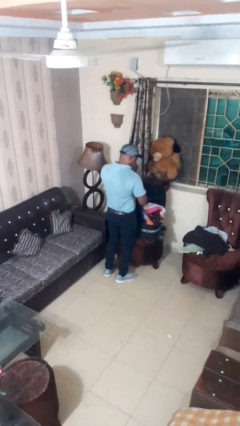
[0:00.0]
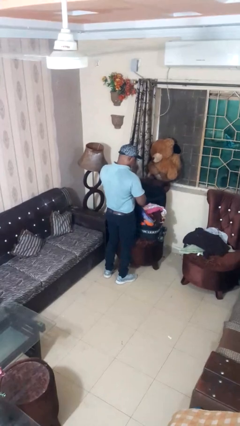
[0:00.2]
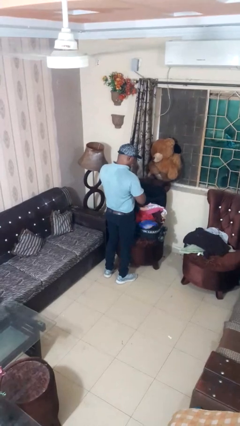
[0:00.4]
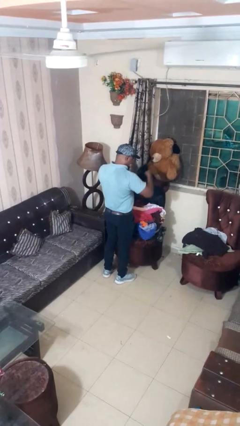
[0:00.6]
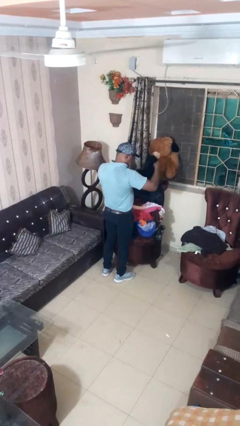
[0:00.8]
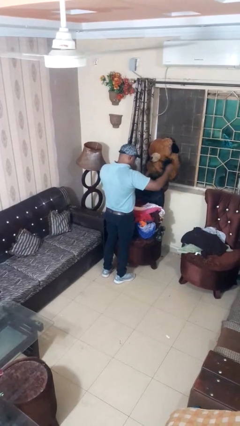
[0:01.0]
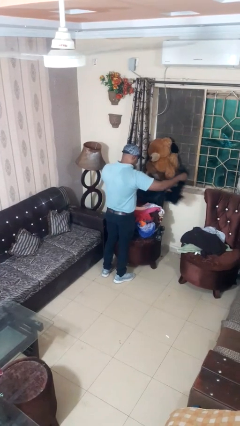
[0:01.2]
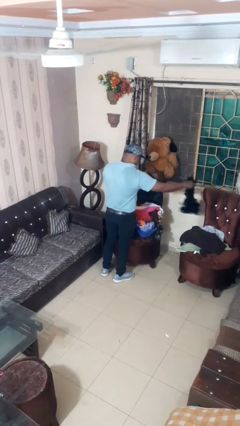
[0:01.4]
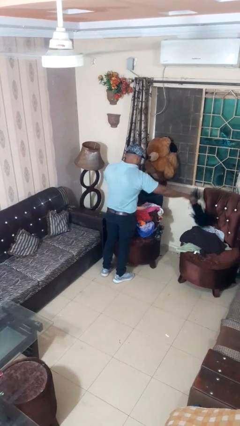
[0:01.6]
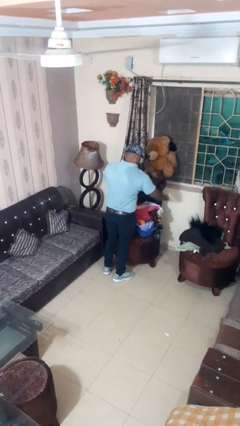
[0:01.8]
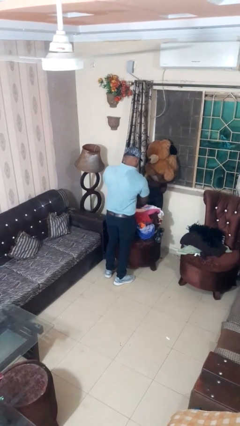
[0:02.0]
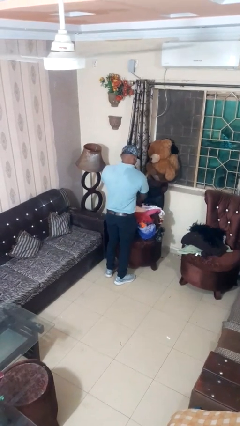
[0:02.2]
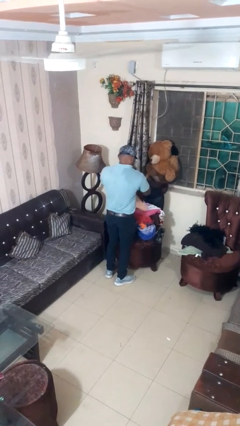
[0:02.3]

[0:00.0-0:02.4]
person unloads clothes from suitcase

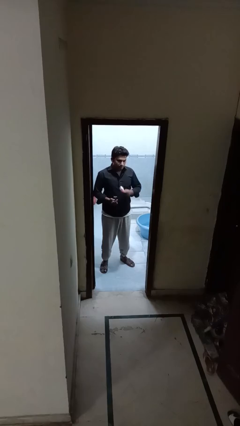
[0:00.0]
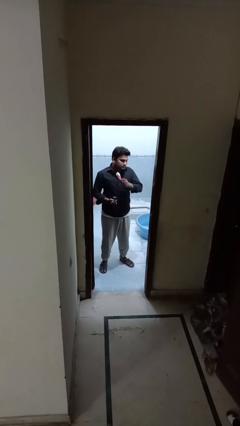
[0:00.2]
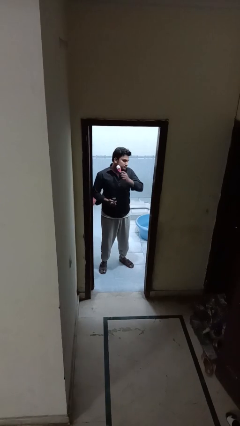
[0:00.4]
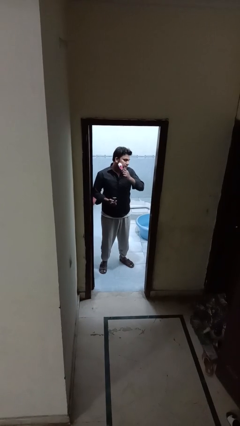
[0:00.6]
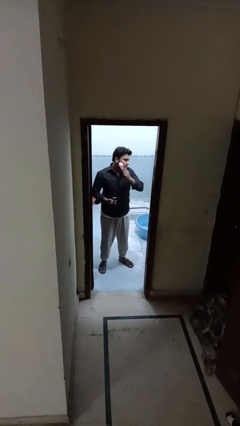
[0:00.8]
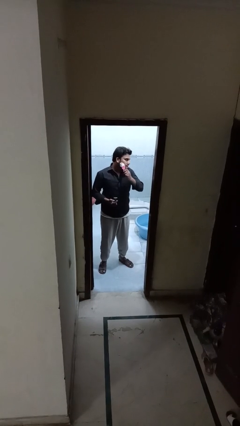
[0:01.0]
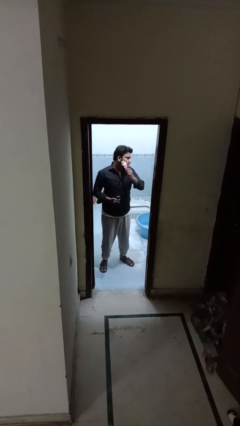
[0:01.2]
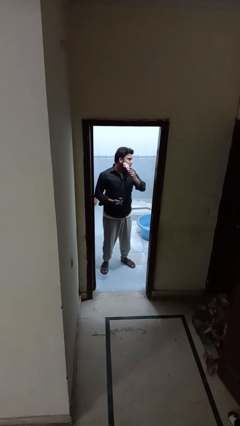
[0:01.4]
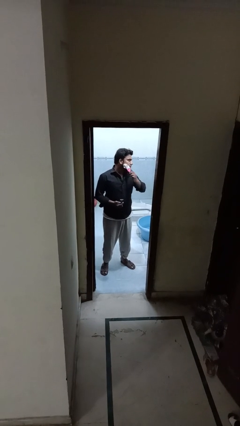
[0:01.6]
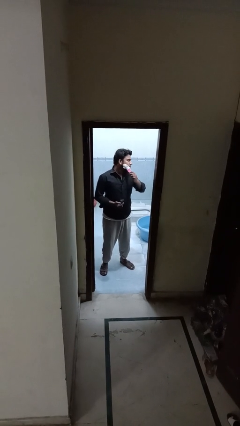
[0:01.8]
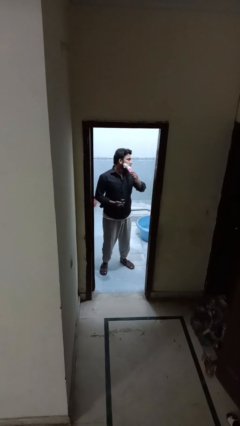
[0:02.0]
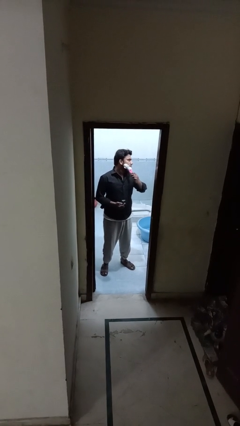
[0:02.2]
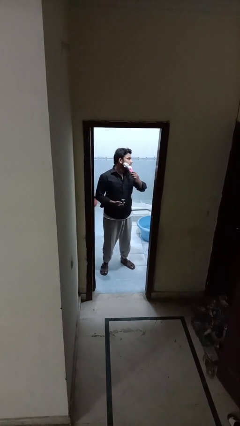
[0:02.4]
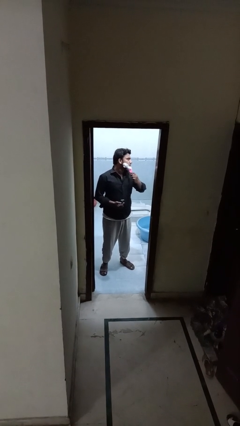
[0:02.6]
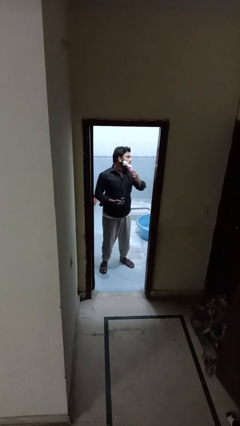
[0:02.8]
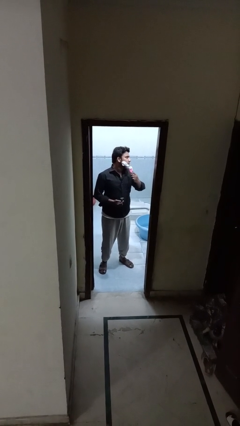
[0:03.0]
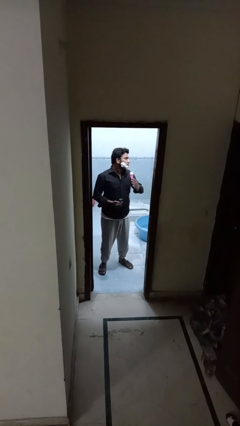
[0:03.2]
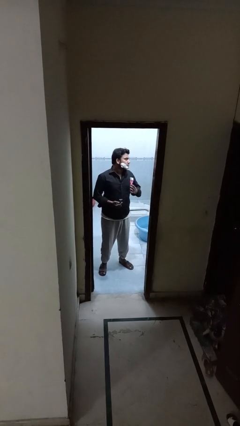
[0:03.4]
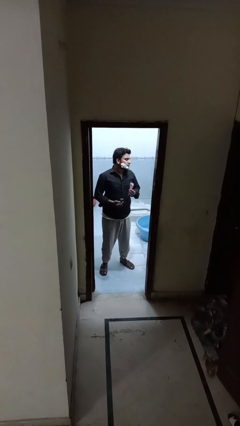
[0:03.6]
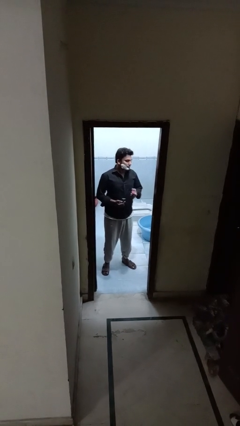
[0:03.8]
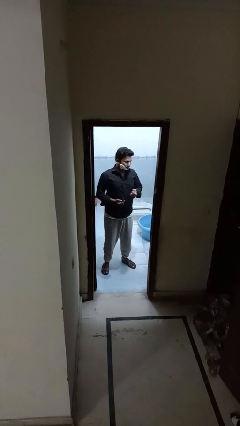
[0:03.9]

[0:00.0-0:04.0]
person applies shaving cream

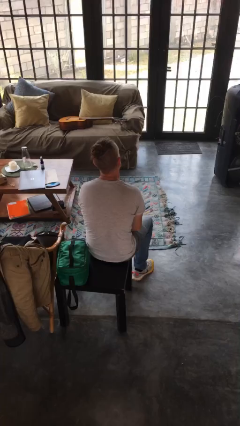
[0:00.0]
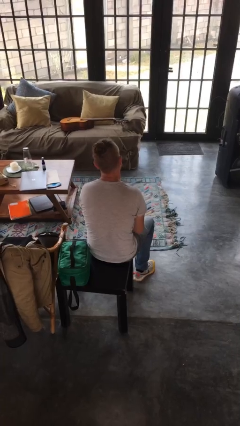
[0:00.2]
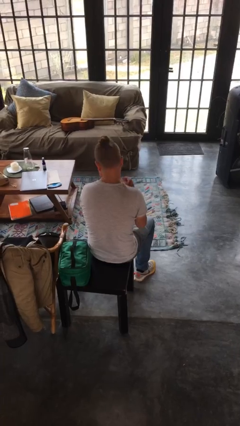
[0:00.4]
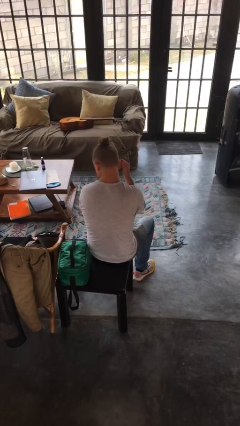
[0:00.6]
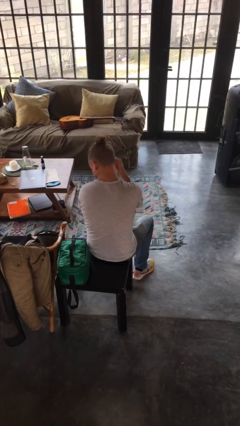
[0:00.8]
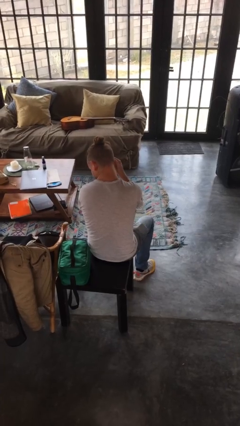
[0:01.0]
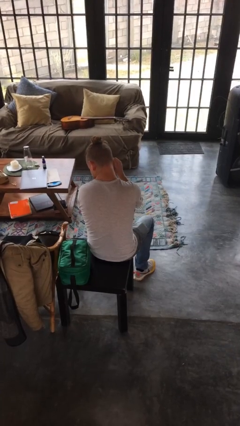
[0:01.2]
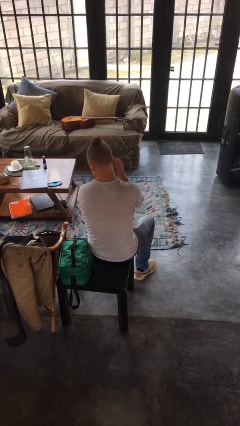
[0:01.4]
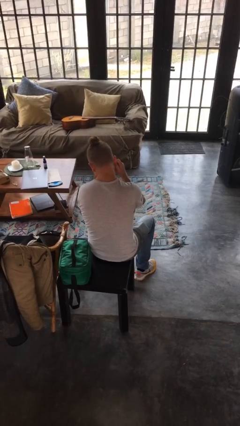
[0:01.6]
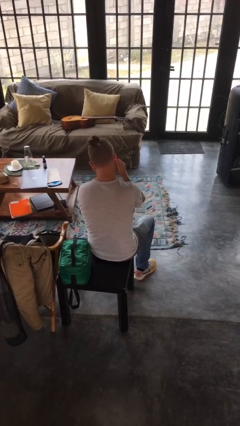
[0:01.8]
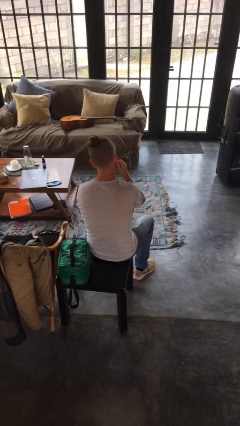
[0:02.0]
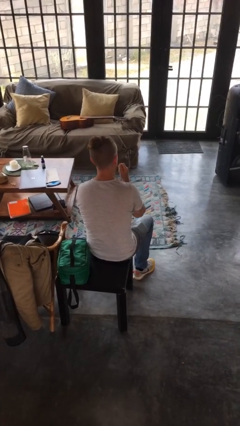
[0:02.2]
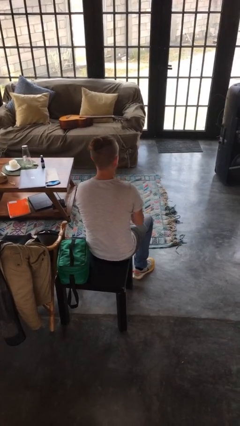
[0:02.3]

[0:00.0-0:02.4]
person touches earlobe

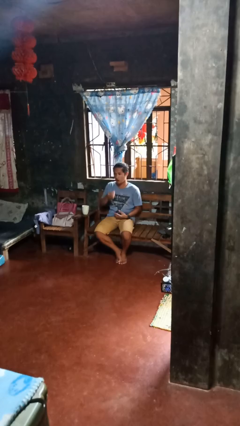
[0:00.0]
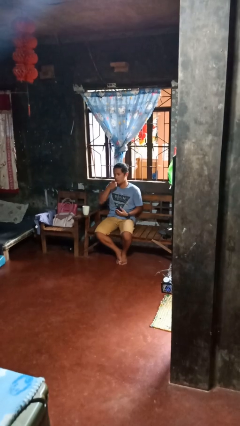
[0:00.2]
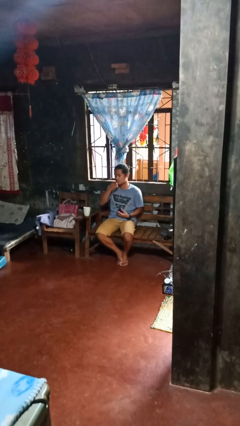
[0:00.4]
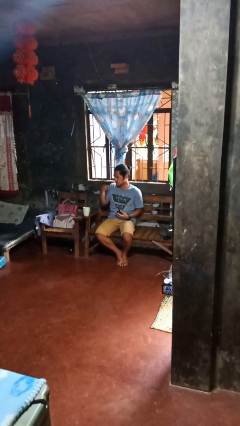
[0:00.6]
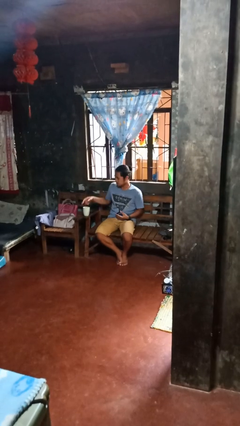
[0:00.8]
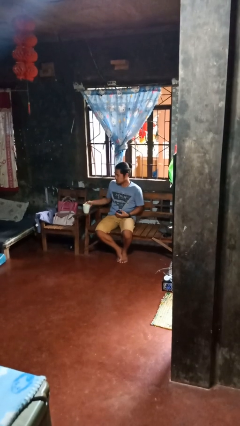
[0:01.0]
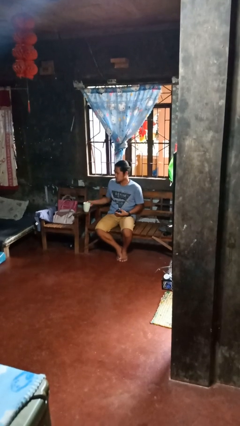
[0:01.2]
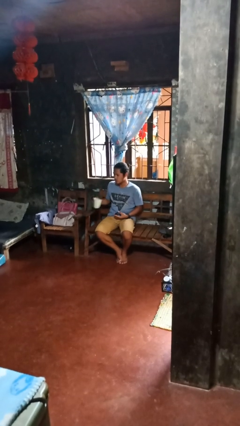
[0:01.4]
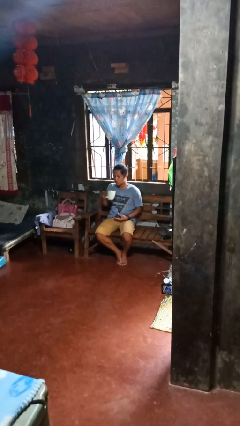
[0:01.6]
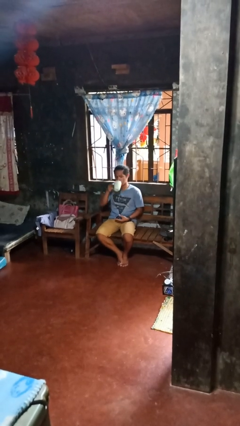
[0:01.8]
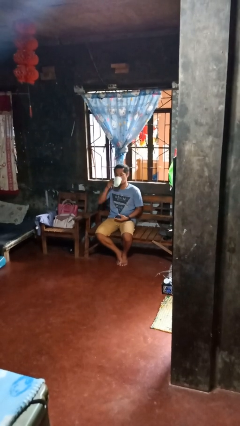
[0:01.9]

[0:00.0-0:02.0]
person takes medicine pills

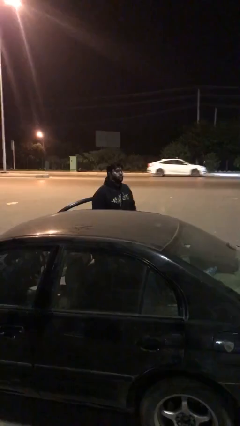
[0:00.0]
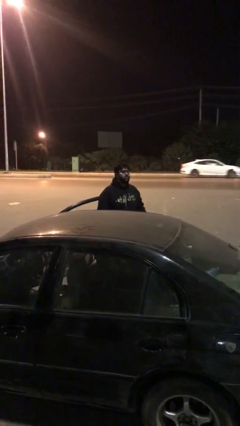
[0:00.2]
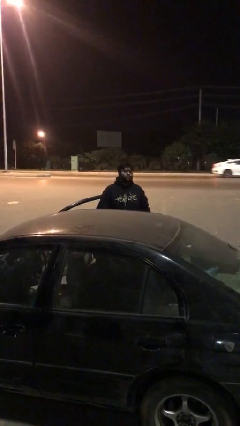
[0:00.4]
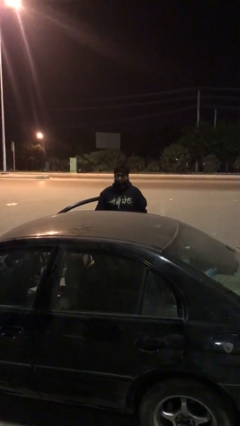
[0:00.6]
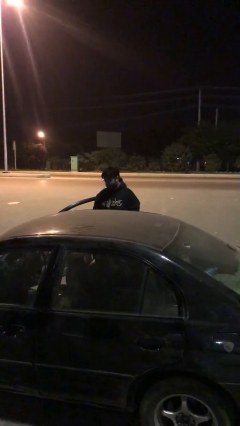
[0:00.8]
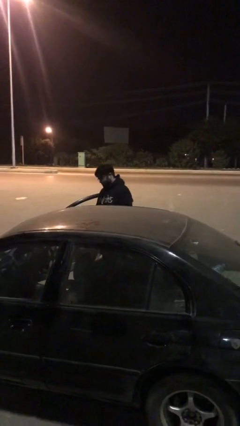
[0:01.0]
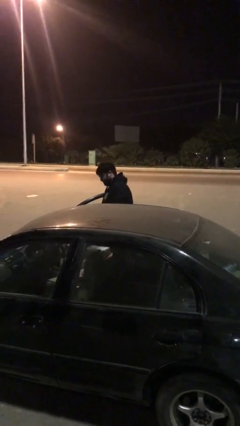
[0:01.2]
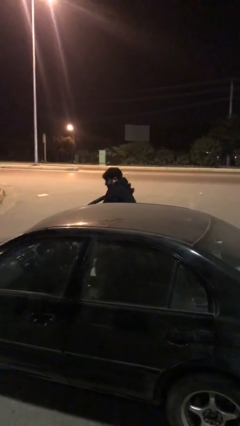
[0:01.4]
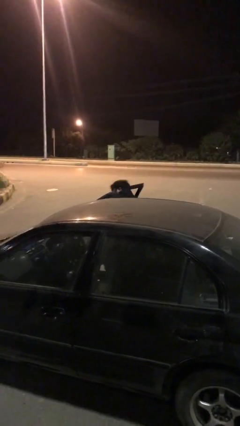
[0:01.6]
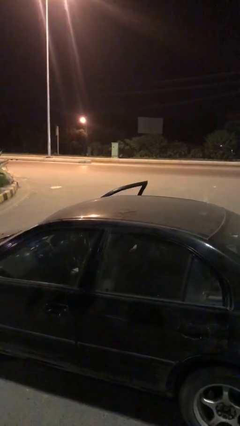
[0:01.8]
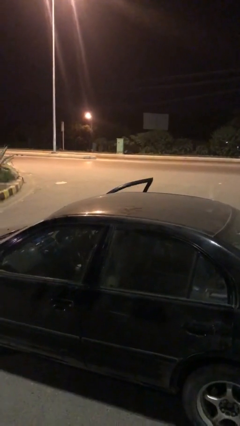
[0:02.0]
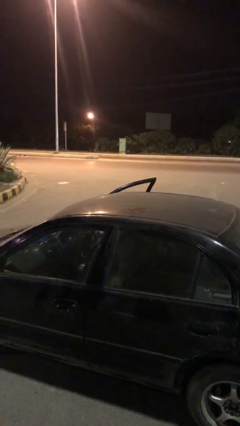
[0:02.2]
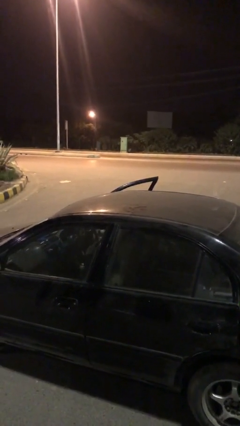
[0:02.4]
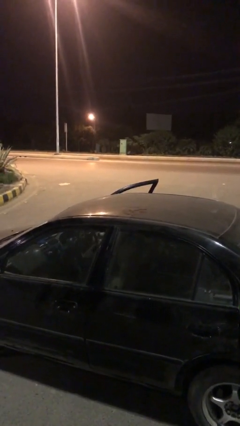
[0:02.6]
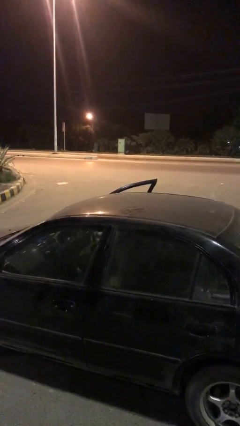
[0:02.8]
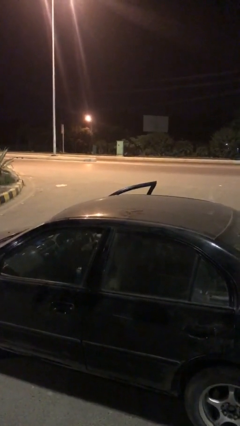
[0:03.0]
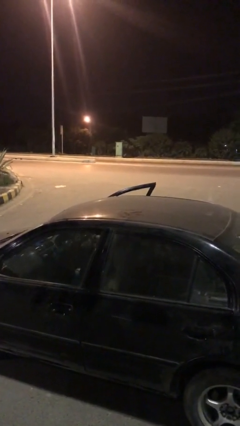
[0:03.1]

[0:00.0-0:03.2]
person enters car

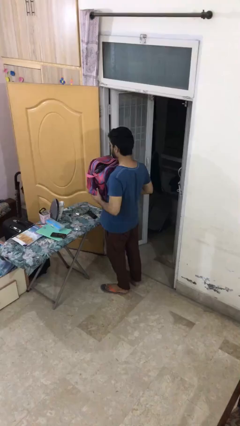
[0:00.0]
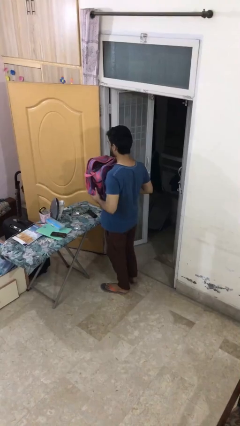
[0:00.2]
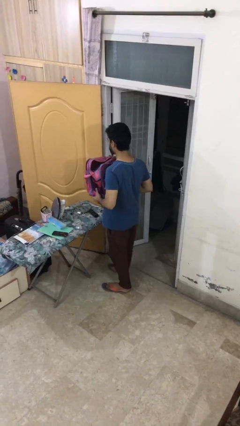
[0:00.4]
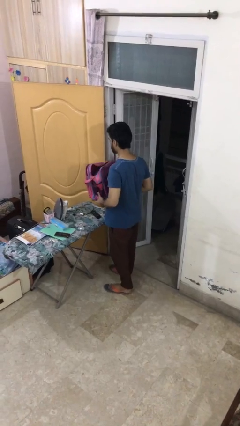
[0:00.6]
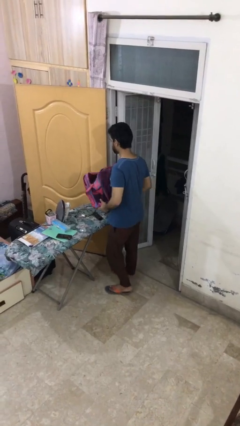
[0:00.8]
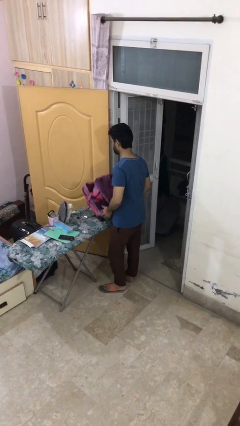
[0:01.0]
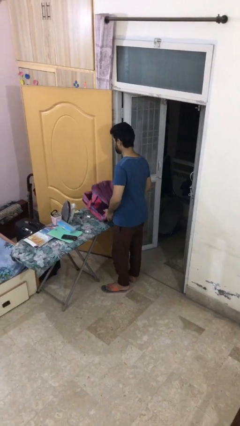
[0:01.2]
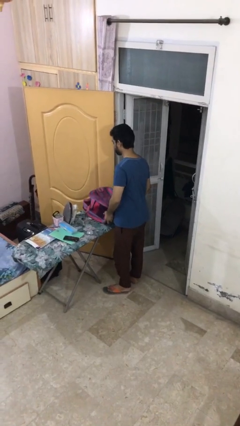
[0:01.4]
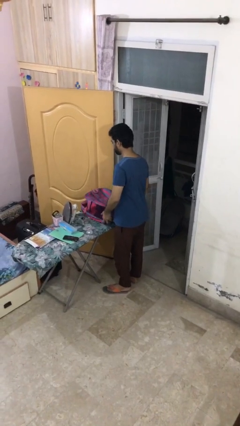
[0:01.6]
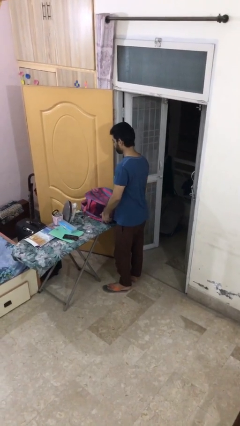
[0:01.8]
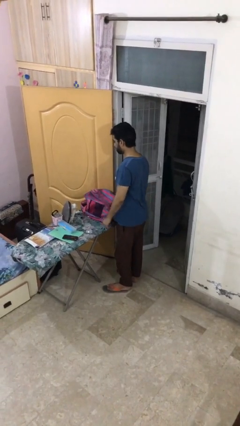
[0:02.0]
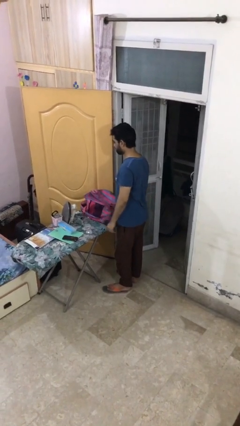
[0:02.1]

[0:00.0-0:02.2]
person puts down object on table

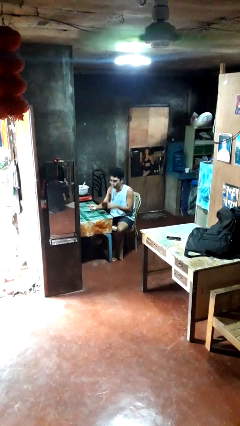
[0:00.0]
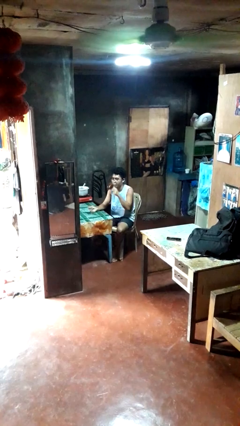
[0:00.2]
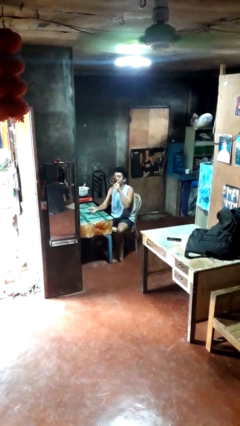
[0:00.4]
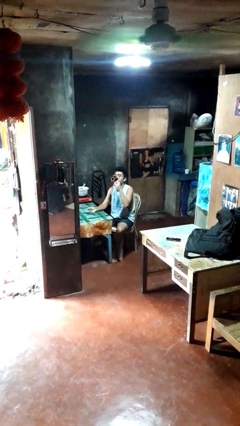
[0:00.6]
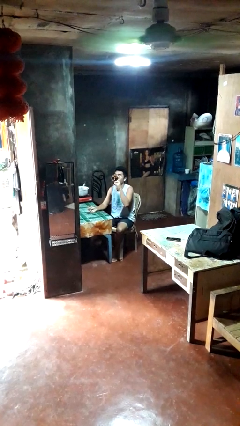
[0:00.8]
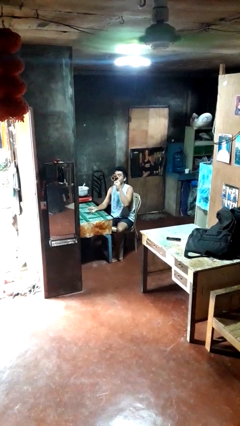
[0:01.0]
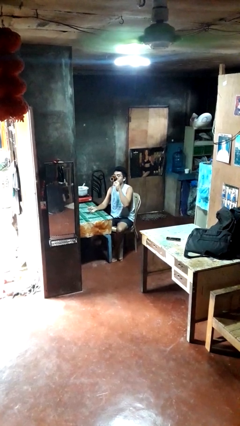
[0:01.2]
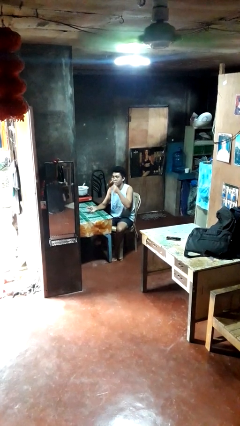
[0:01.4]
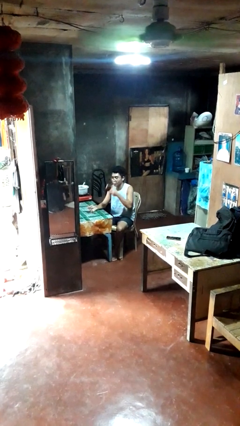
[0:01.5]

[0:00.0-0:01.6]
person drinks from mug
